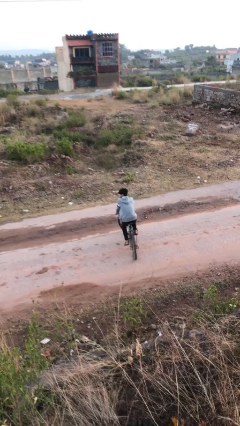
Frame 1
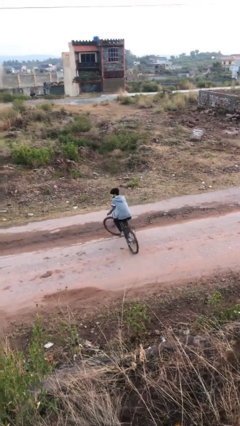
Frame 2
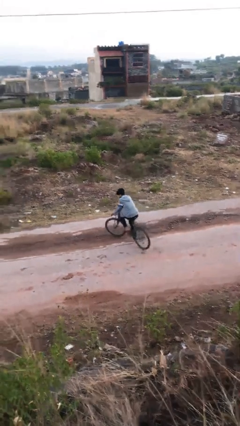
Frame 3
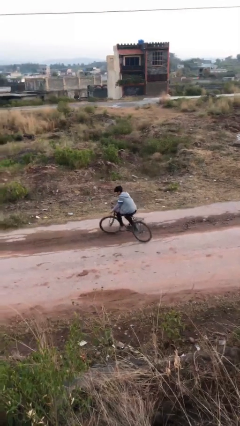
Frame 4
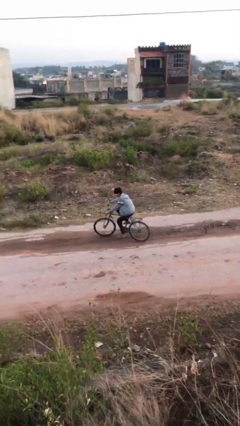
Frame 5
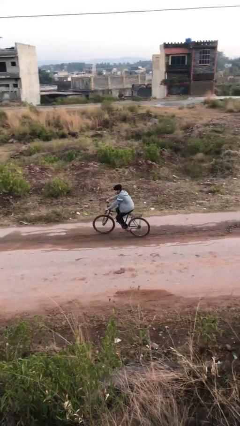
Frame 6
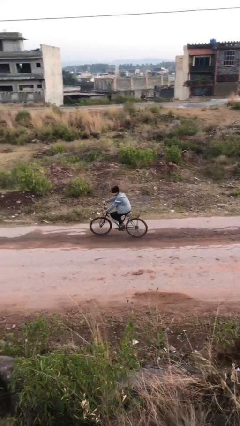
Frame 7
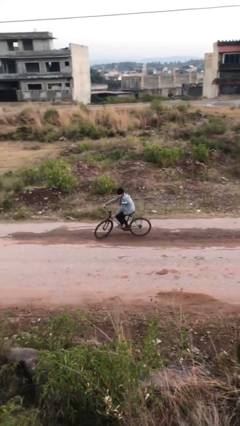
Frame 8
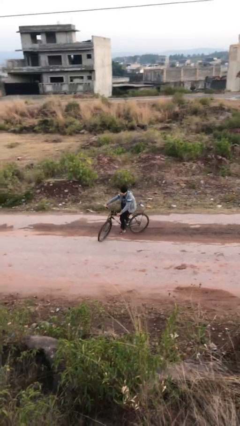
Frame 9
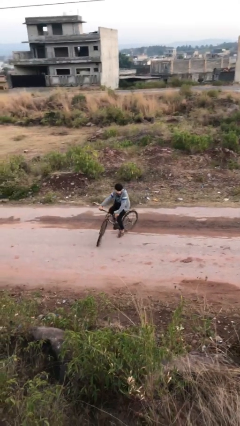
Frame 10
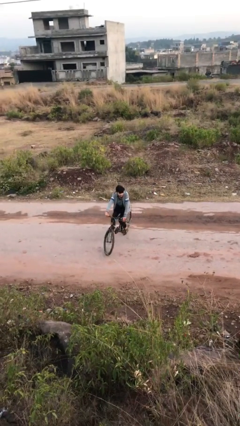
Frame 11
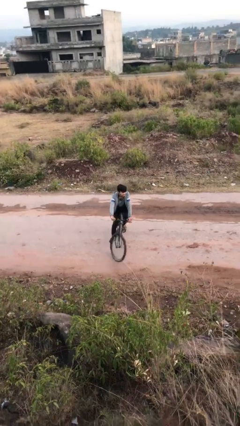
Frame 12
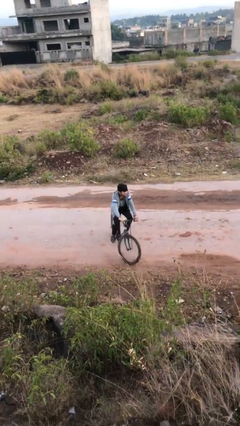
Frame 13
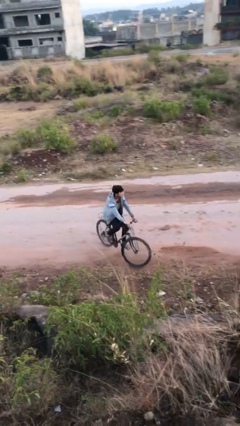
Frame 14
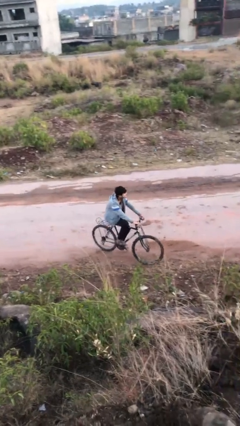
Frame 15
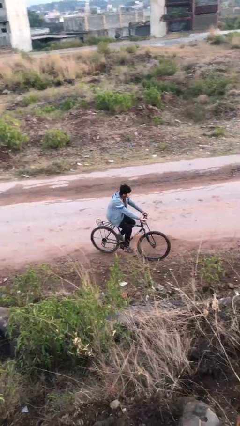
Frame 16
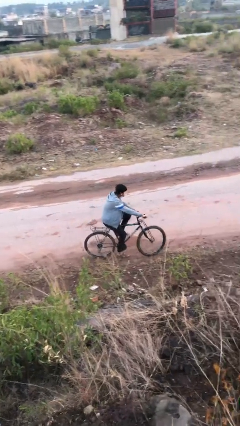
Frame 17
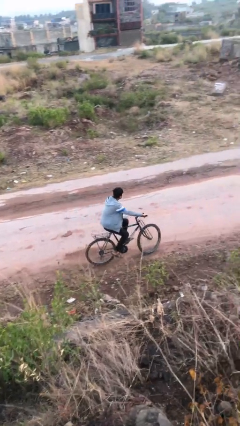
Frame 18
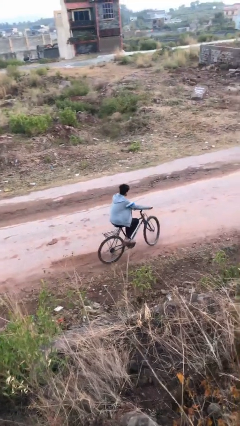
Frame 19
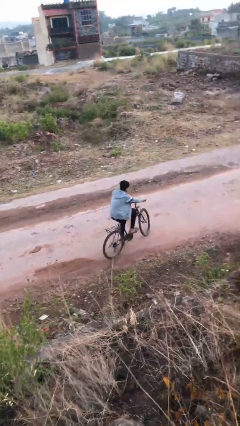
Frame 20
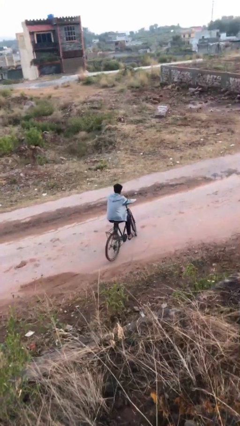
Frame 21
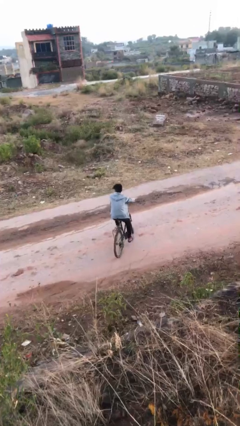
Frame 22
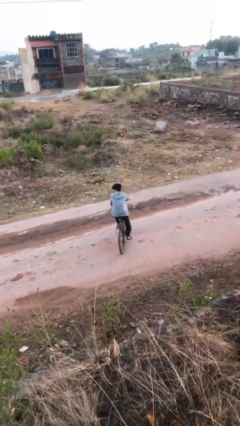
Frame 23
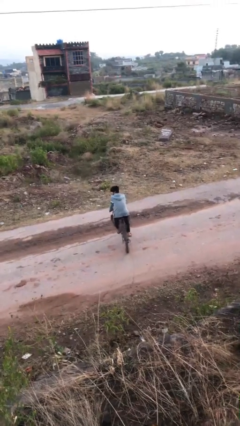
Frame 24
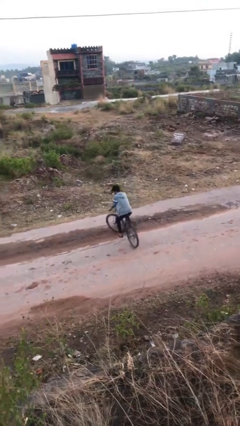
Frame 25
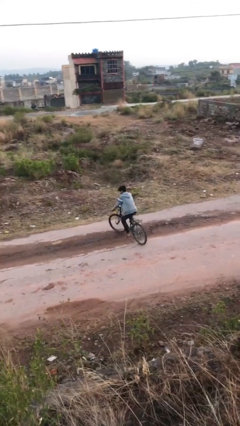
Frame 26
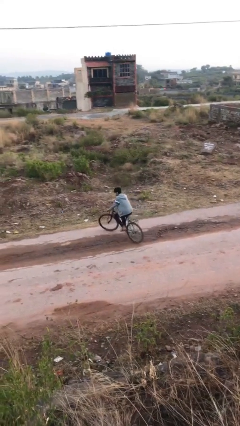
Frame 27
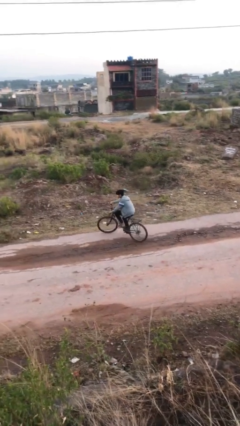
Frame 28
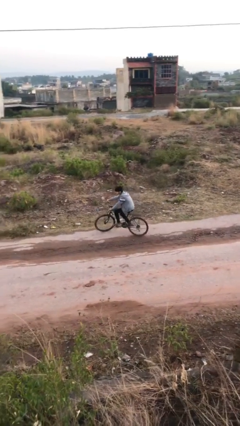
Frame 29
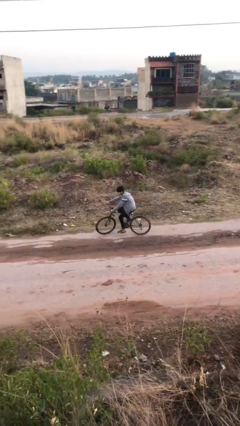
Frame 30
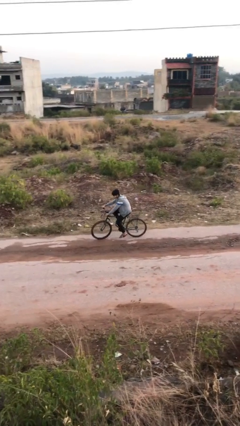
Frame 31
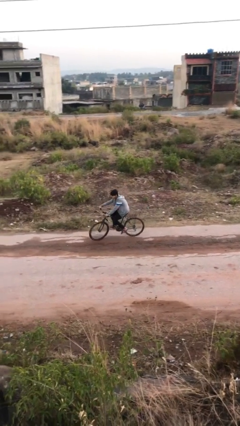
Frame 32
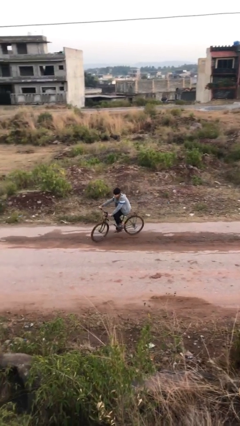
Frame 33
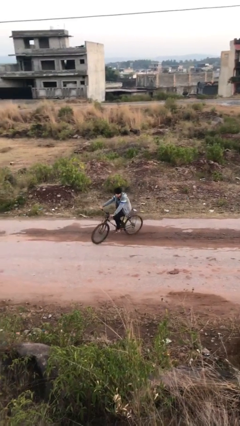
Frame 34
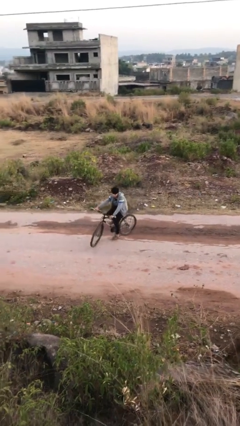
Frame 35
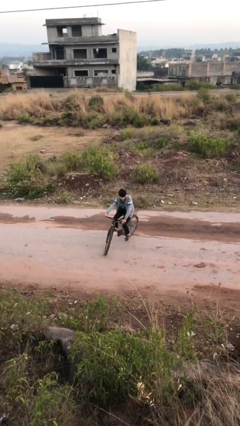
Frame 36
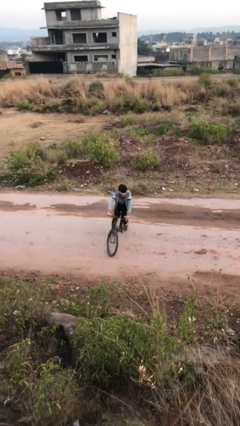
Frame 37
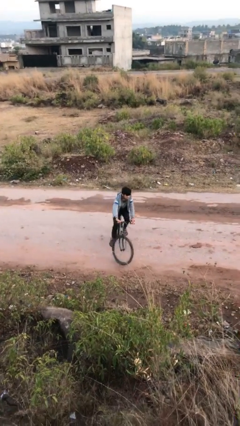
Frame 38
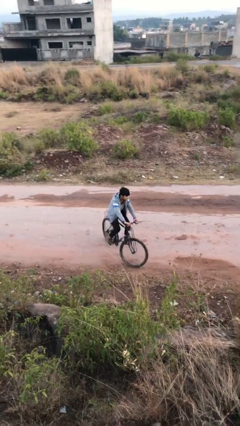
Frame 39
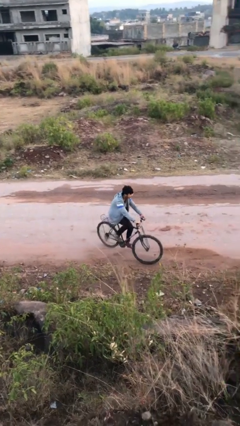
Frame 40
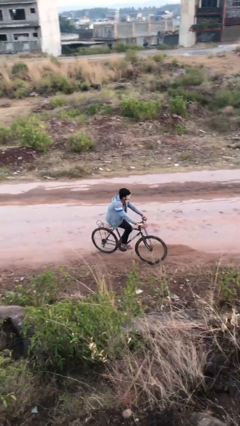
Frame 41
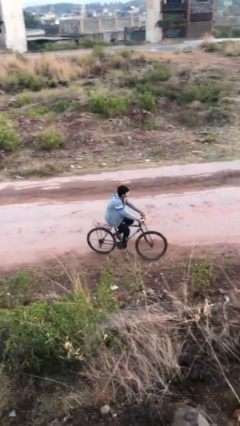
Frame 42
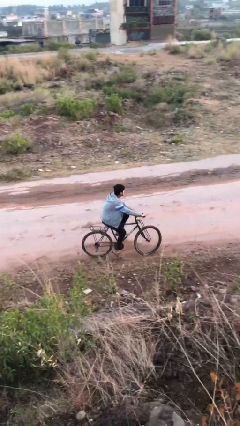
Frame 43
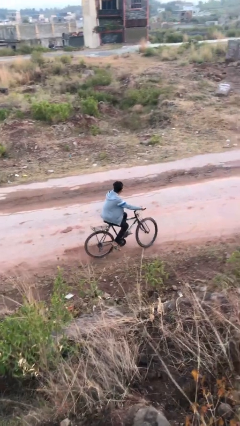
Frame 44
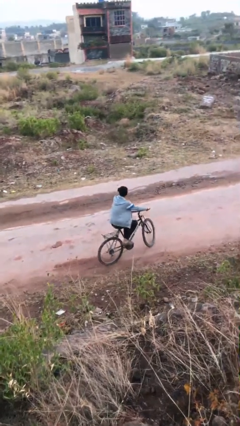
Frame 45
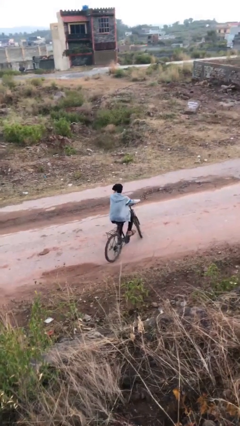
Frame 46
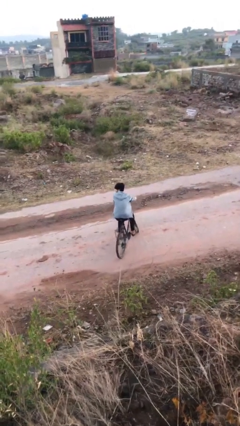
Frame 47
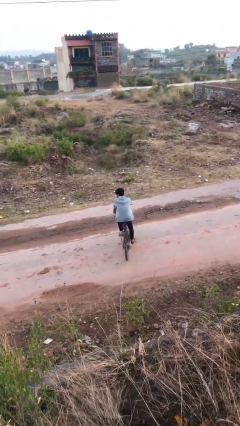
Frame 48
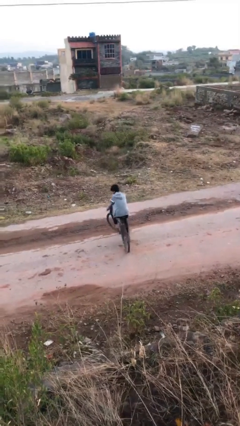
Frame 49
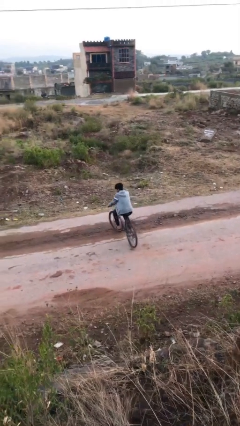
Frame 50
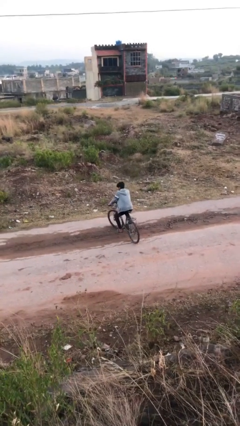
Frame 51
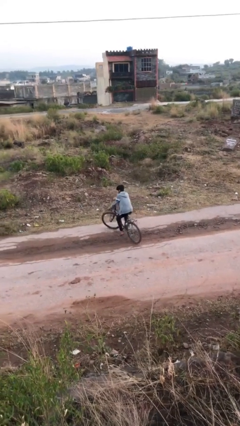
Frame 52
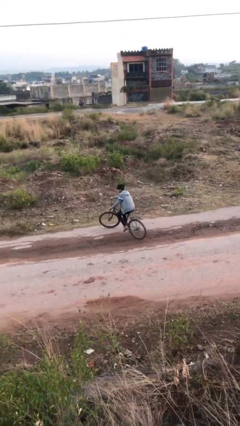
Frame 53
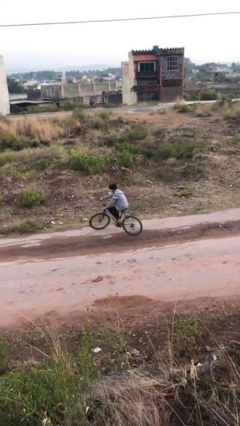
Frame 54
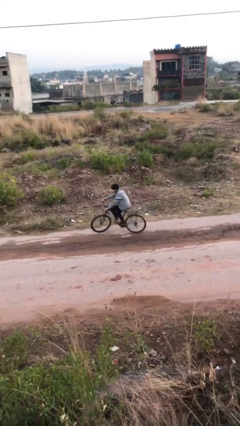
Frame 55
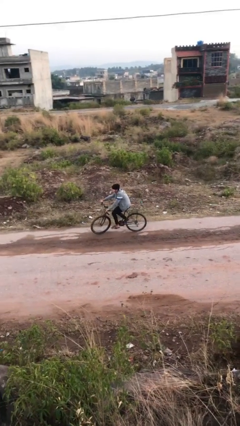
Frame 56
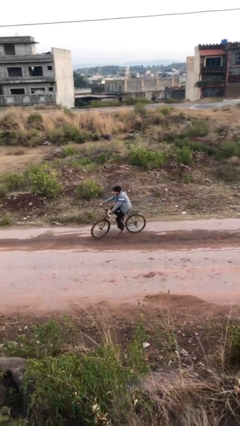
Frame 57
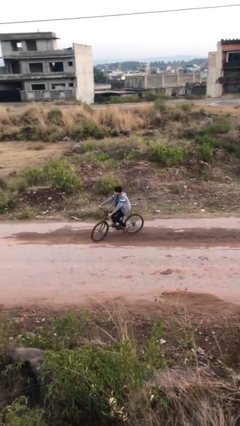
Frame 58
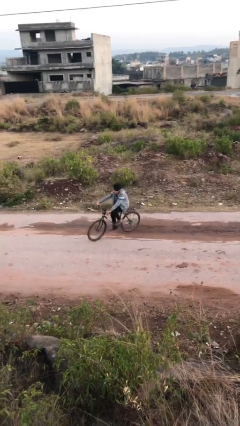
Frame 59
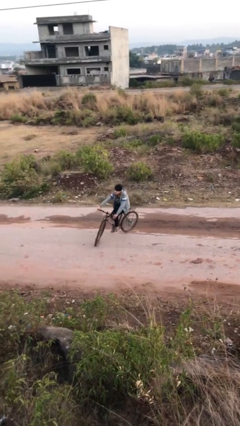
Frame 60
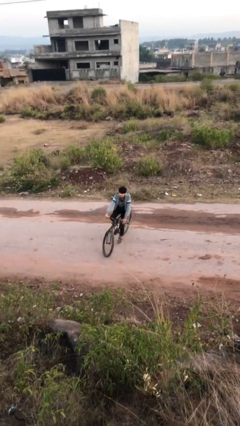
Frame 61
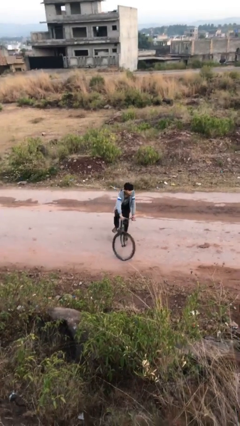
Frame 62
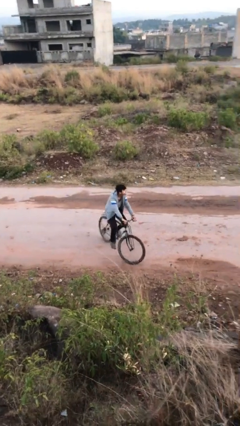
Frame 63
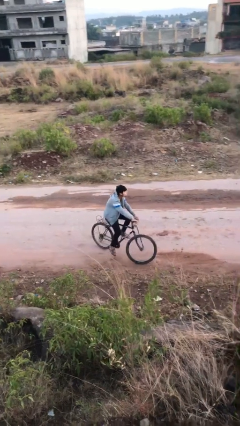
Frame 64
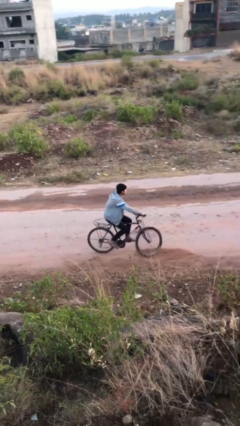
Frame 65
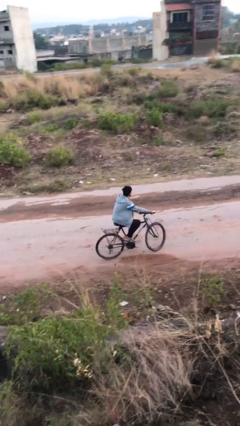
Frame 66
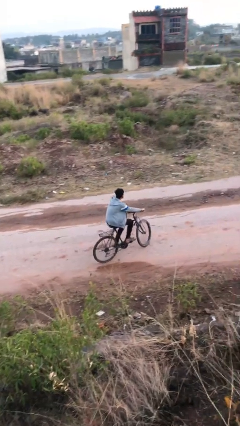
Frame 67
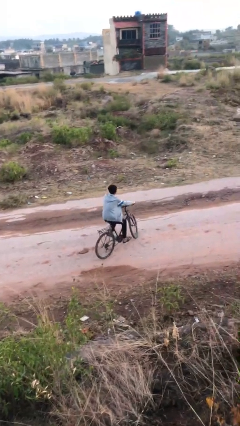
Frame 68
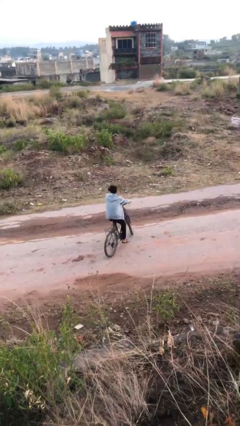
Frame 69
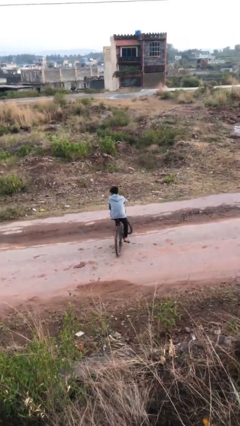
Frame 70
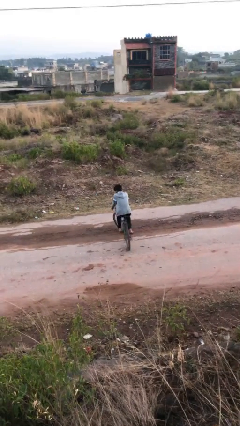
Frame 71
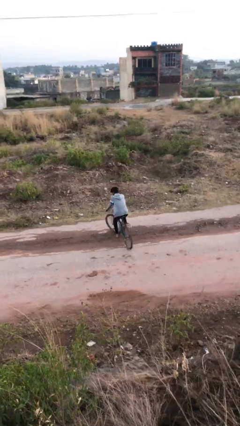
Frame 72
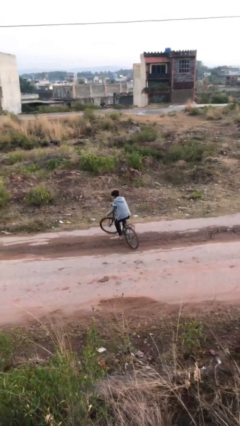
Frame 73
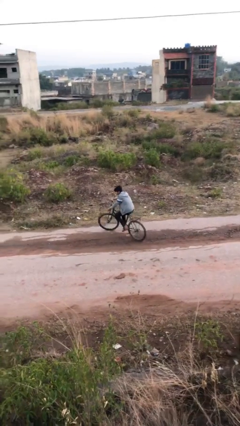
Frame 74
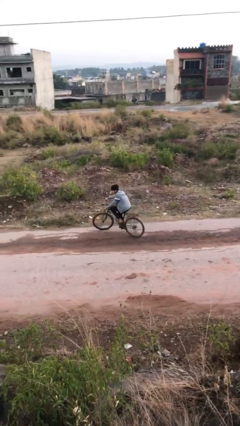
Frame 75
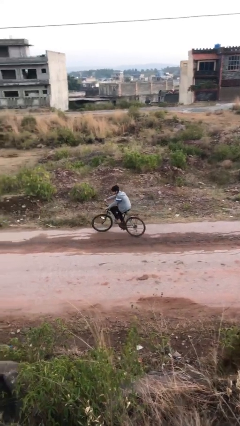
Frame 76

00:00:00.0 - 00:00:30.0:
person rides bicycle

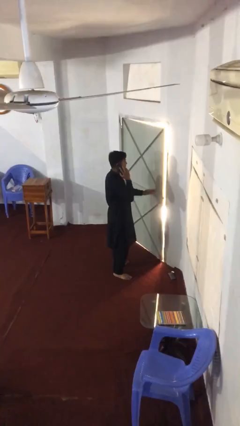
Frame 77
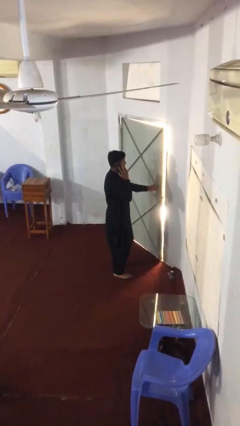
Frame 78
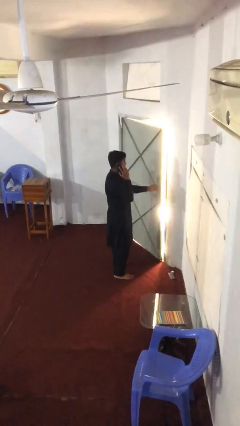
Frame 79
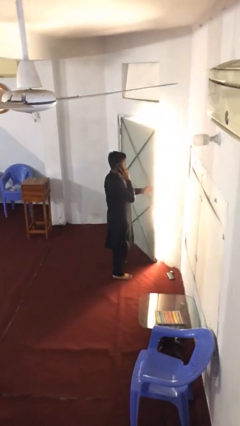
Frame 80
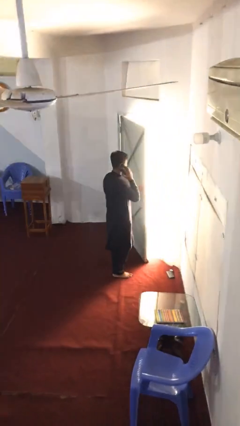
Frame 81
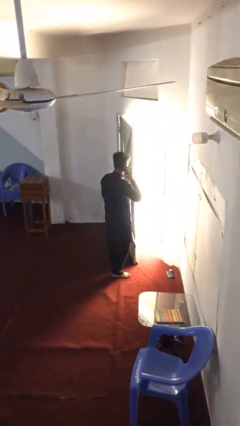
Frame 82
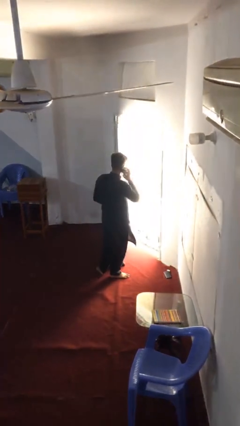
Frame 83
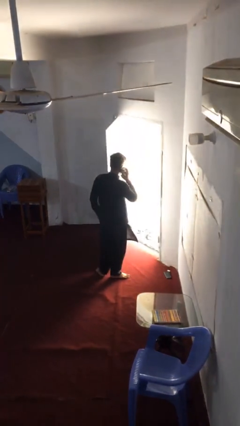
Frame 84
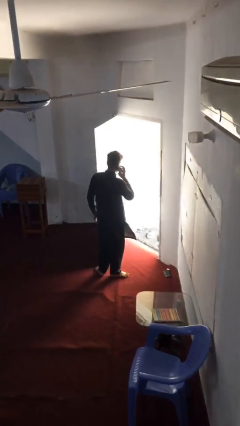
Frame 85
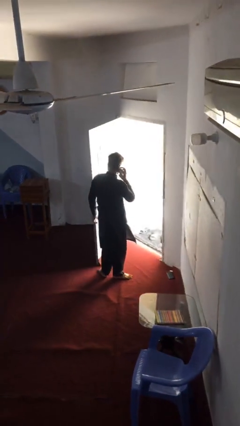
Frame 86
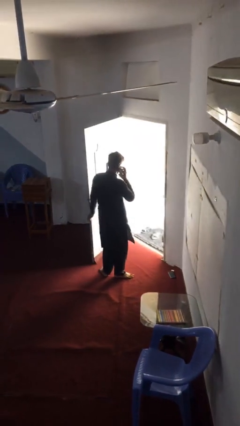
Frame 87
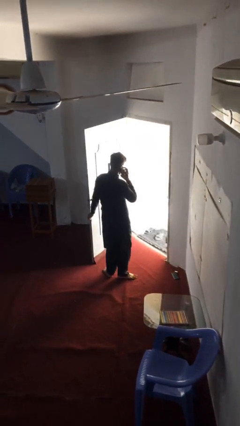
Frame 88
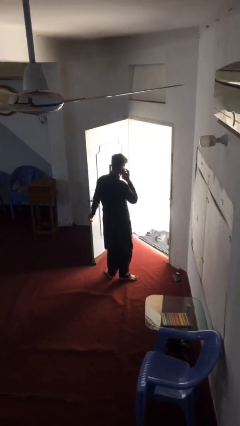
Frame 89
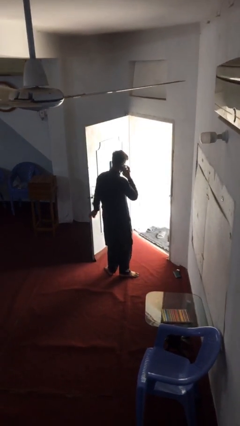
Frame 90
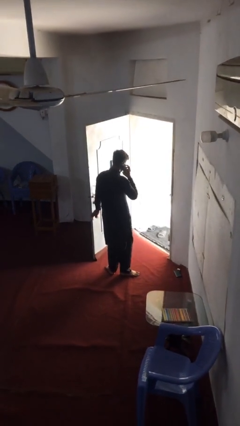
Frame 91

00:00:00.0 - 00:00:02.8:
person opens facility door

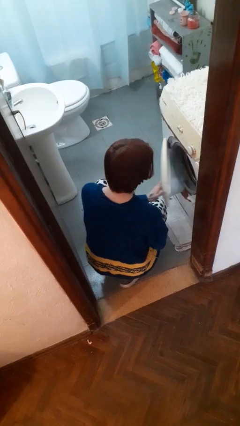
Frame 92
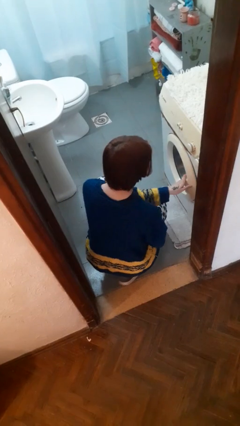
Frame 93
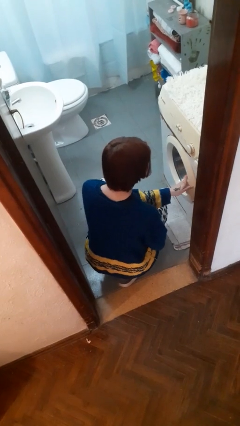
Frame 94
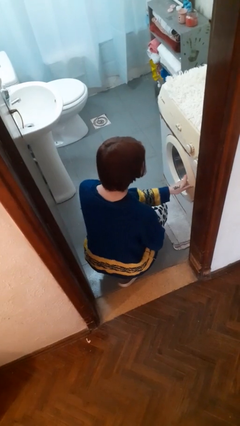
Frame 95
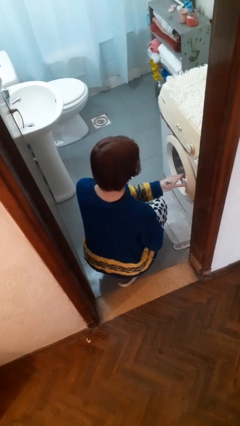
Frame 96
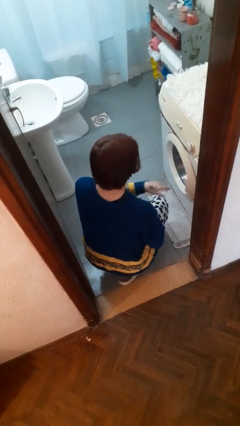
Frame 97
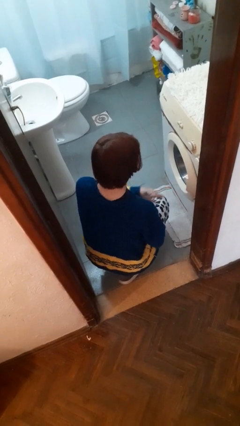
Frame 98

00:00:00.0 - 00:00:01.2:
person closes clothes washer
